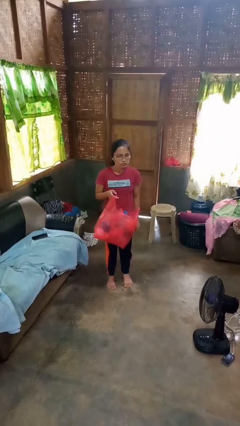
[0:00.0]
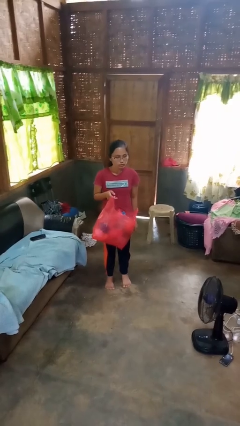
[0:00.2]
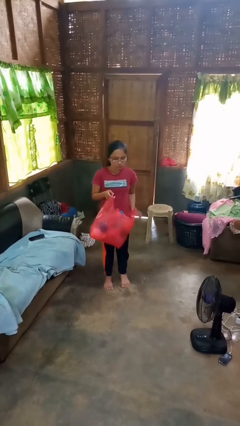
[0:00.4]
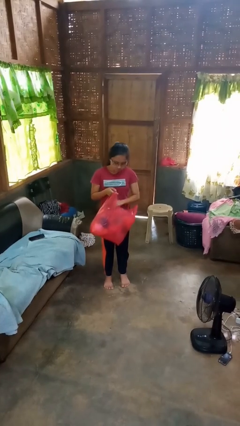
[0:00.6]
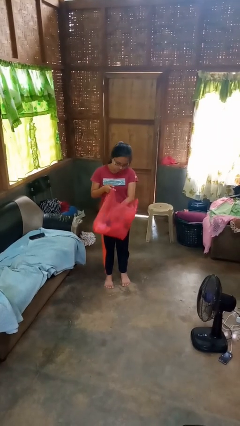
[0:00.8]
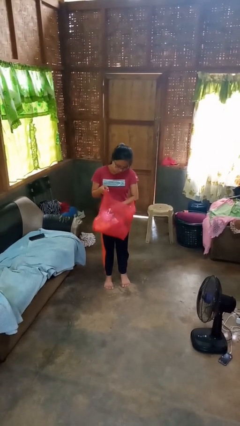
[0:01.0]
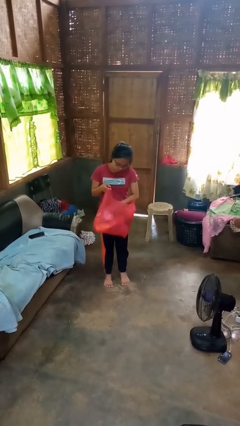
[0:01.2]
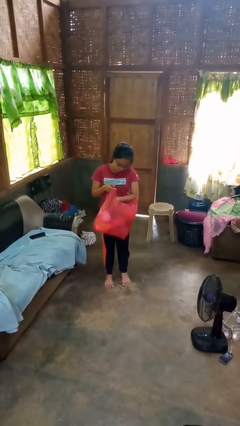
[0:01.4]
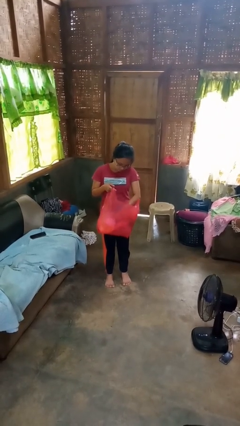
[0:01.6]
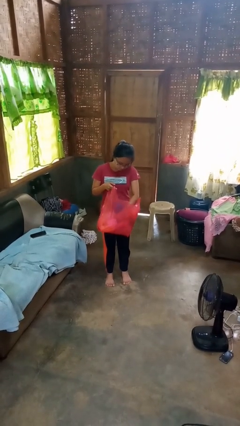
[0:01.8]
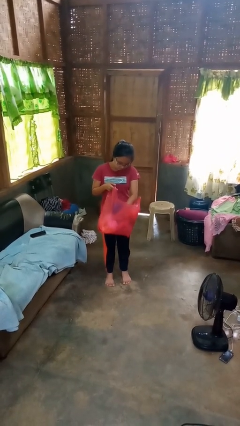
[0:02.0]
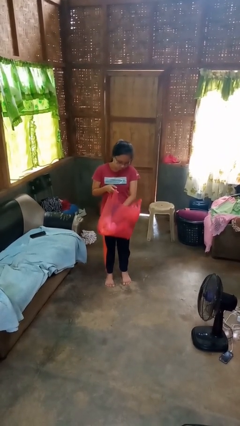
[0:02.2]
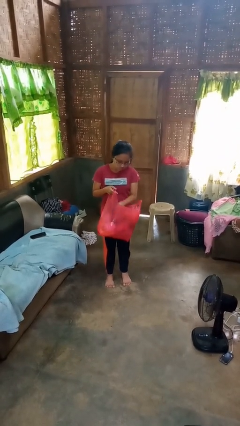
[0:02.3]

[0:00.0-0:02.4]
person searches in bag

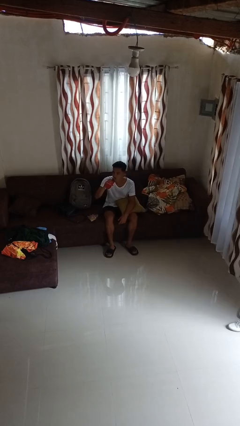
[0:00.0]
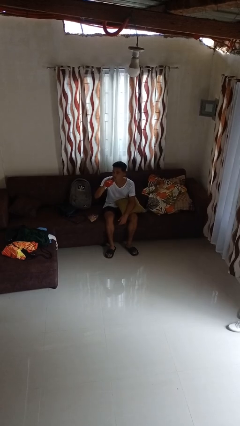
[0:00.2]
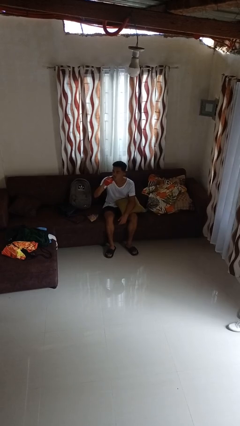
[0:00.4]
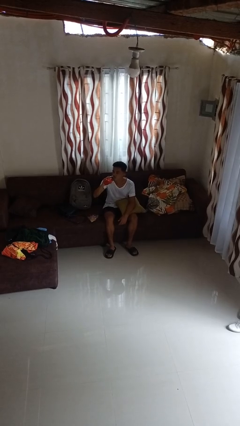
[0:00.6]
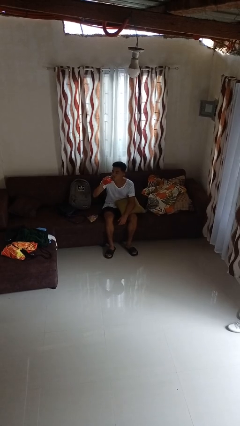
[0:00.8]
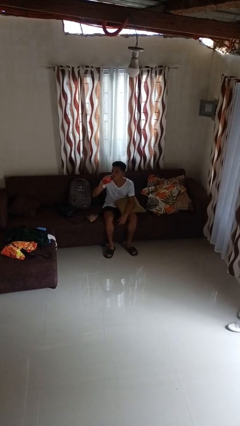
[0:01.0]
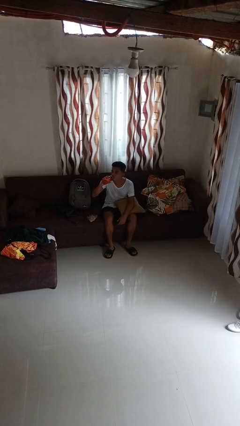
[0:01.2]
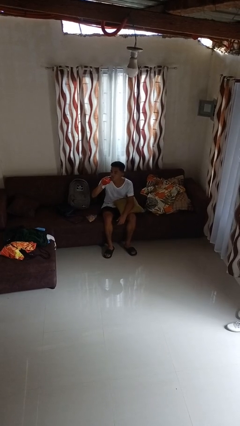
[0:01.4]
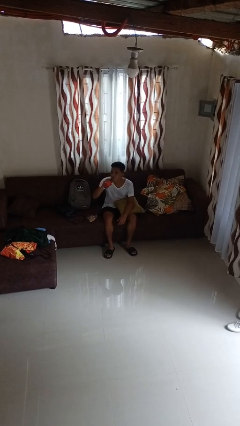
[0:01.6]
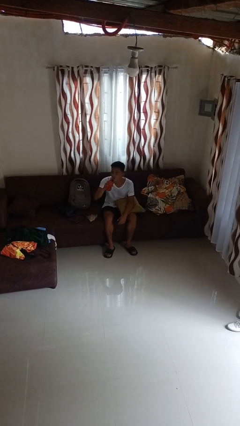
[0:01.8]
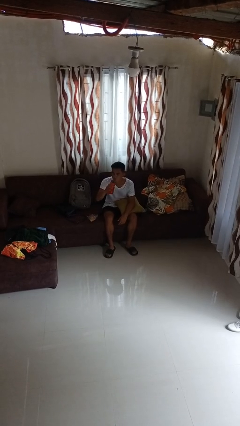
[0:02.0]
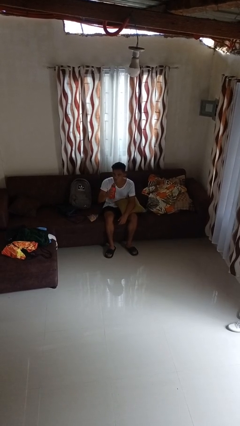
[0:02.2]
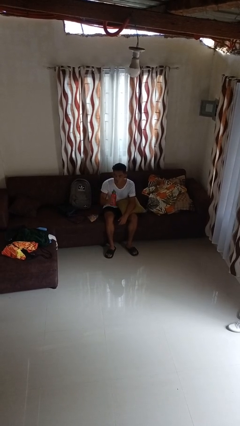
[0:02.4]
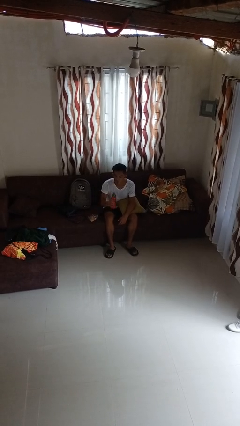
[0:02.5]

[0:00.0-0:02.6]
person drinks from bottle

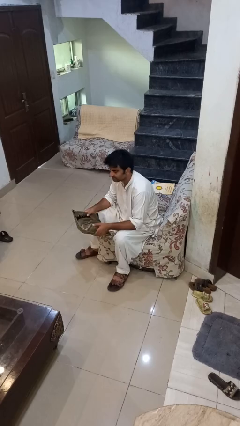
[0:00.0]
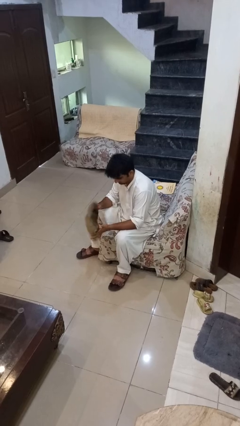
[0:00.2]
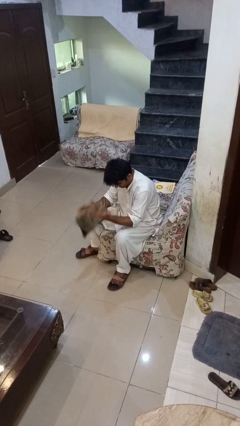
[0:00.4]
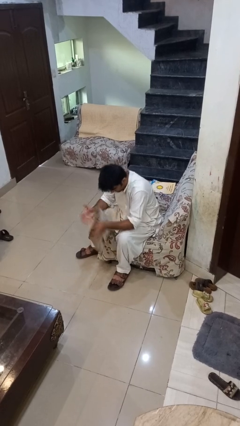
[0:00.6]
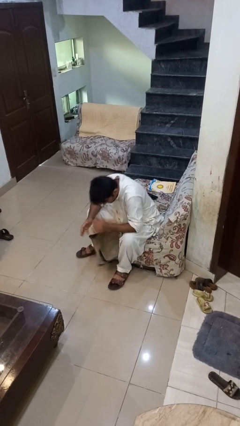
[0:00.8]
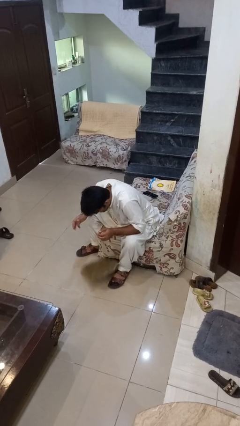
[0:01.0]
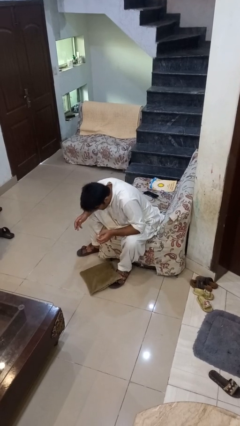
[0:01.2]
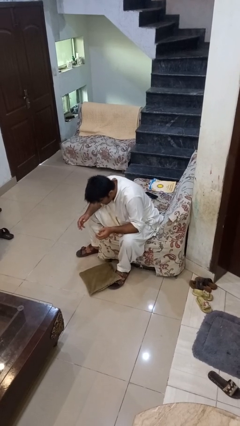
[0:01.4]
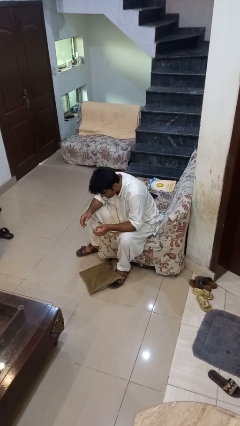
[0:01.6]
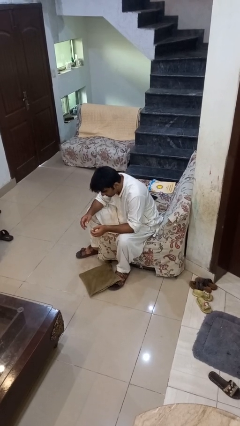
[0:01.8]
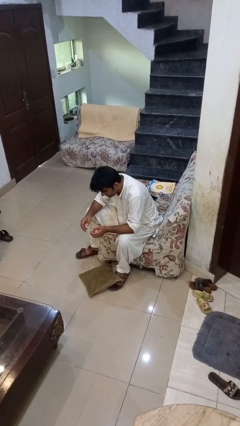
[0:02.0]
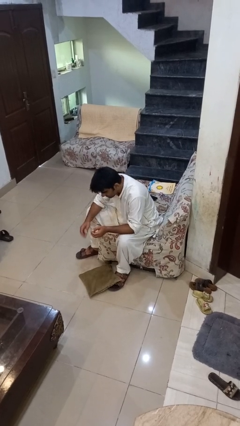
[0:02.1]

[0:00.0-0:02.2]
person drops object

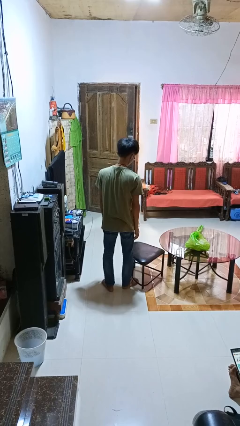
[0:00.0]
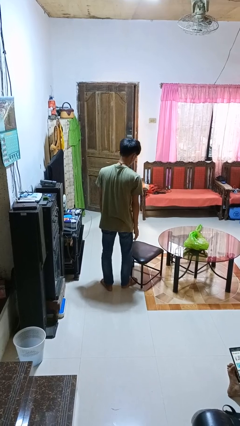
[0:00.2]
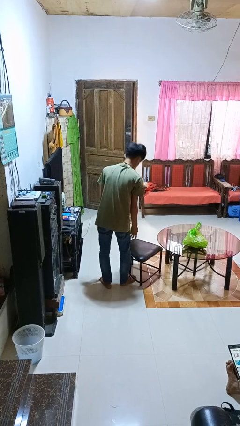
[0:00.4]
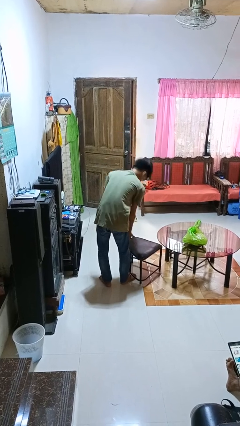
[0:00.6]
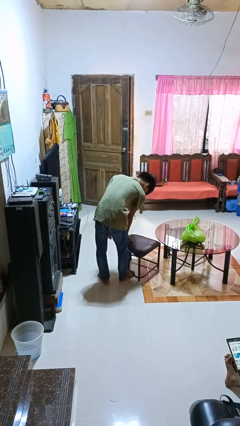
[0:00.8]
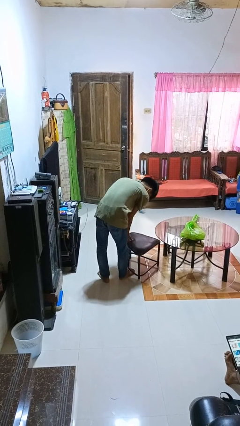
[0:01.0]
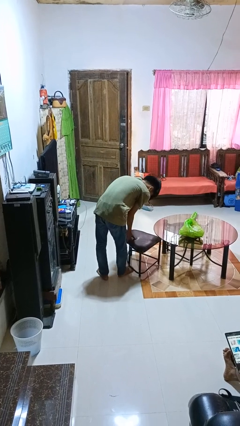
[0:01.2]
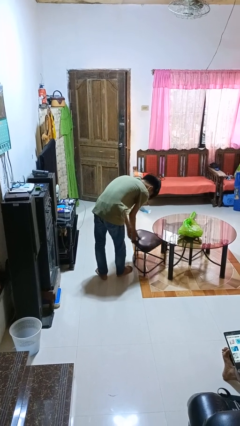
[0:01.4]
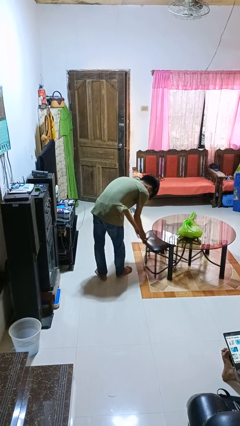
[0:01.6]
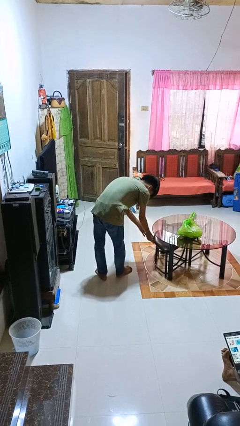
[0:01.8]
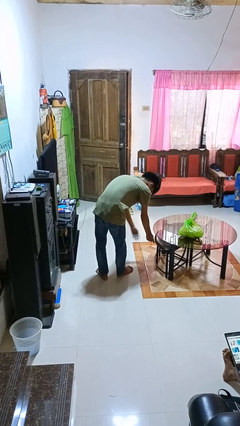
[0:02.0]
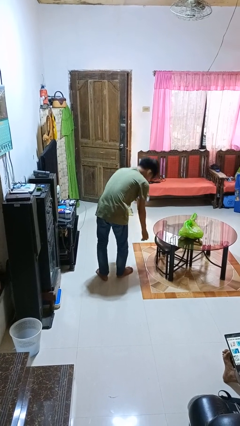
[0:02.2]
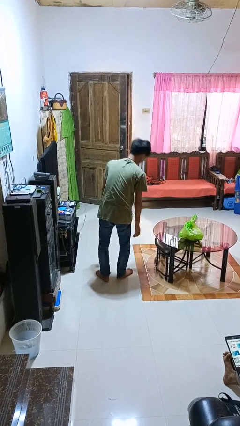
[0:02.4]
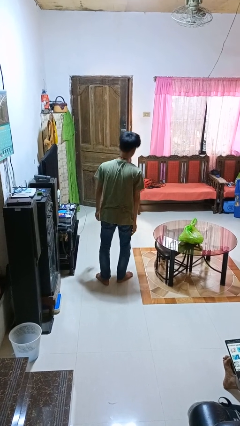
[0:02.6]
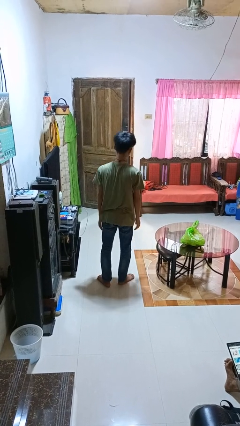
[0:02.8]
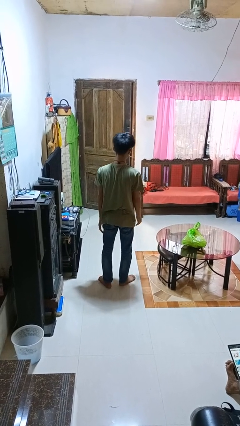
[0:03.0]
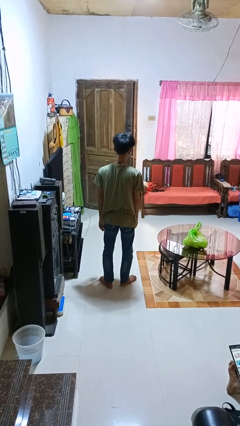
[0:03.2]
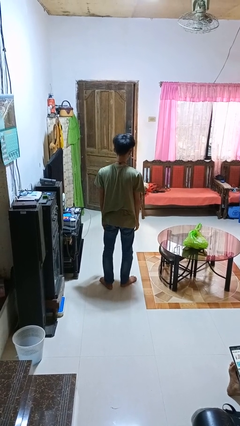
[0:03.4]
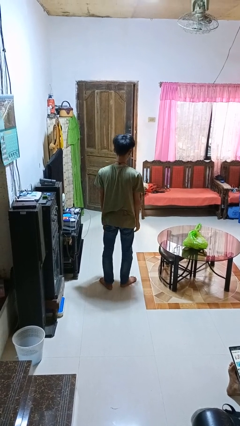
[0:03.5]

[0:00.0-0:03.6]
person pushes in chair

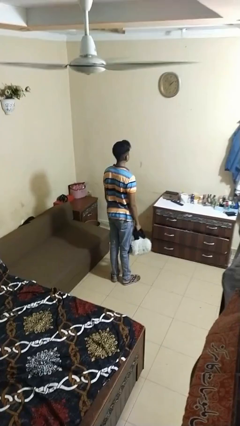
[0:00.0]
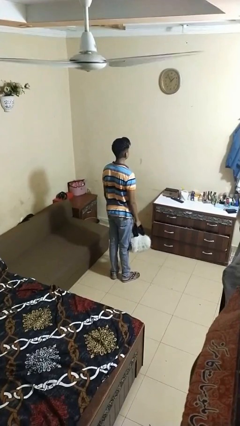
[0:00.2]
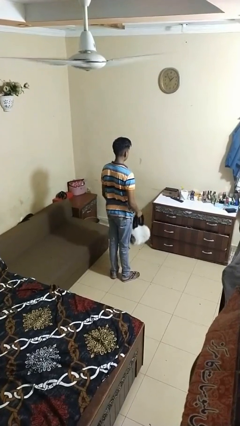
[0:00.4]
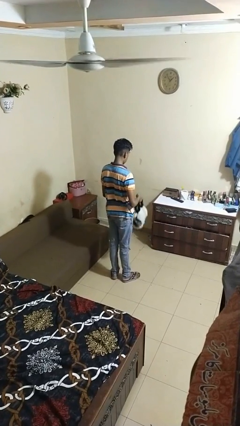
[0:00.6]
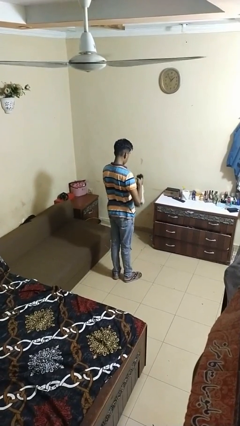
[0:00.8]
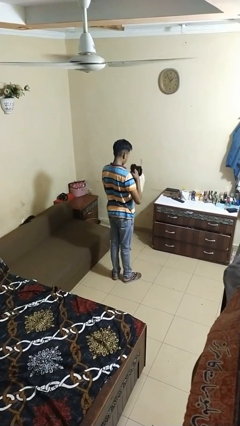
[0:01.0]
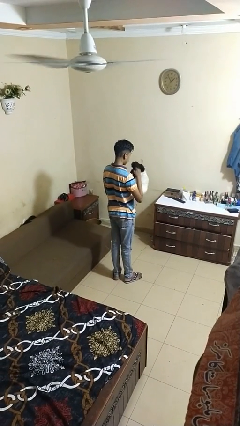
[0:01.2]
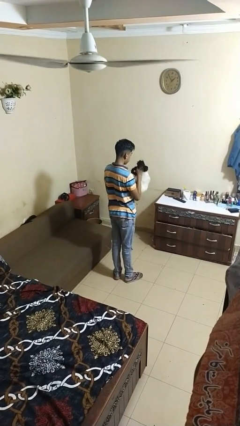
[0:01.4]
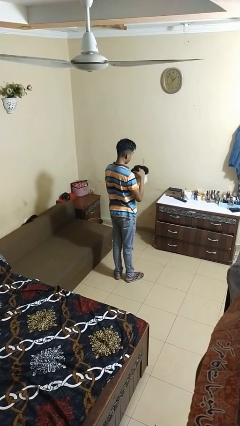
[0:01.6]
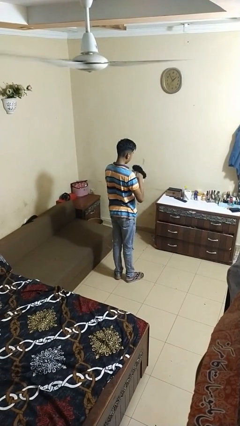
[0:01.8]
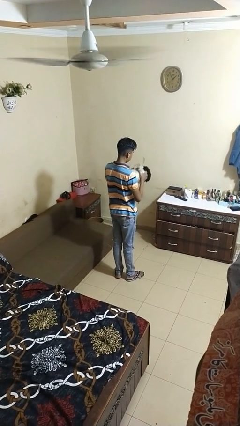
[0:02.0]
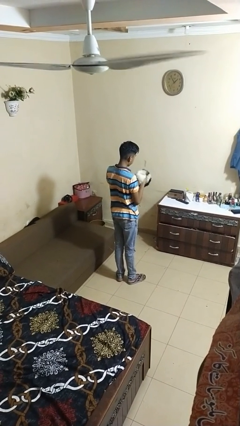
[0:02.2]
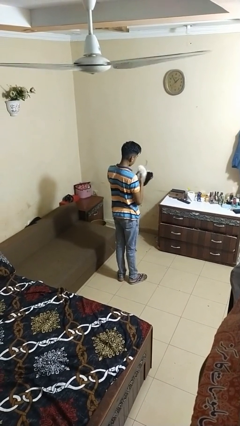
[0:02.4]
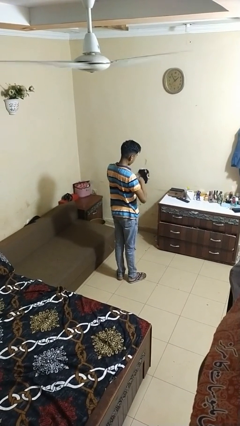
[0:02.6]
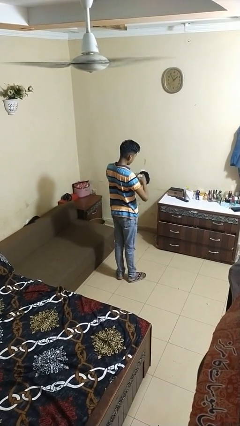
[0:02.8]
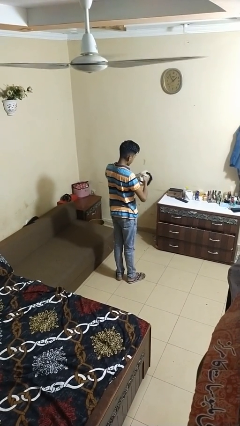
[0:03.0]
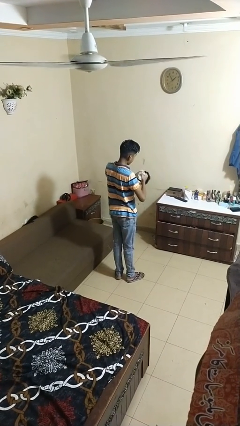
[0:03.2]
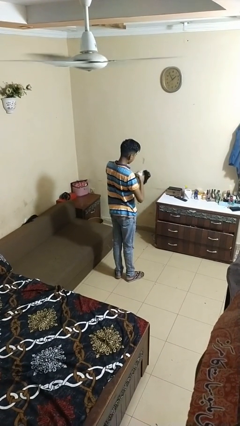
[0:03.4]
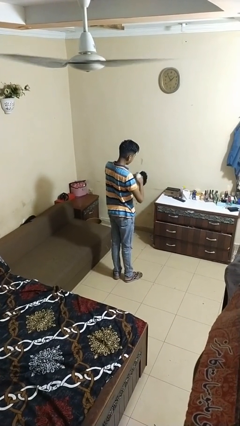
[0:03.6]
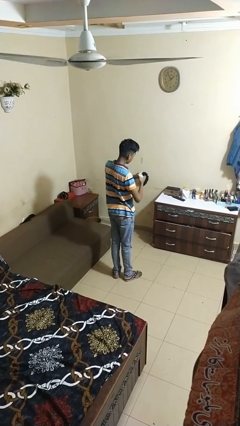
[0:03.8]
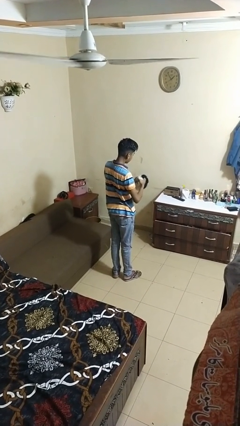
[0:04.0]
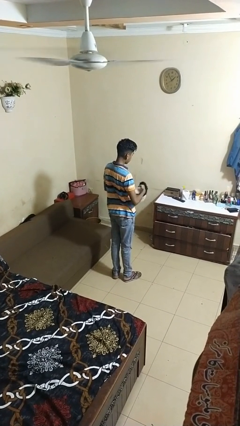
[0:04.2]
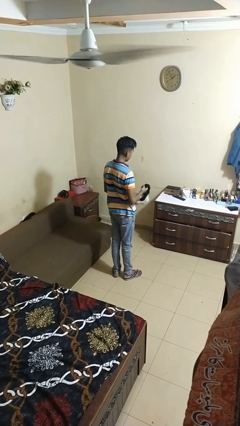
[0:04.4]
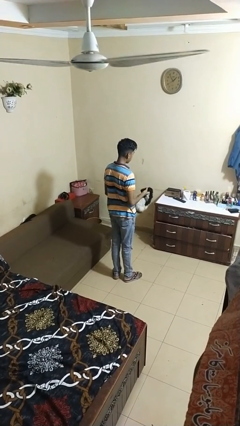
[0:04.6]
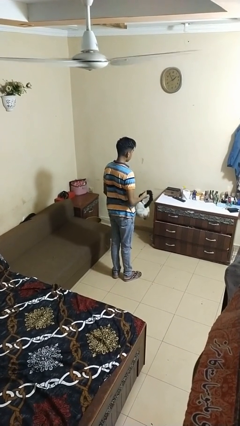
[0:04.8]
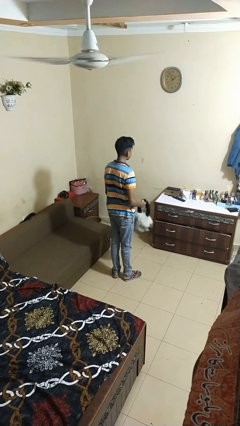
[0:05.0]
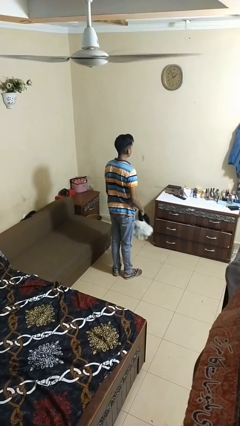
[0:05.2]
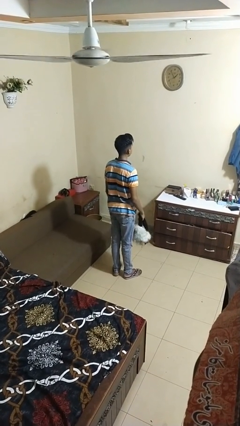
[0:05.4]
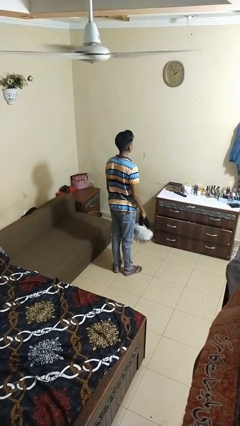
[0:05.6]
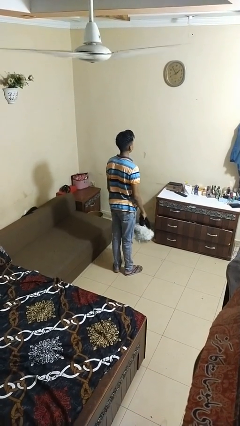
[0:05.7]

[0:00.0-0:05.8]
person squeezes object

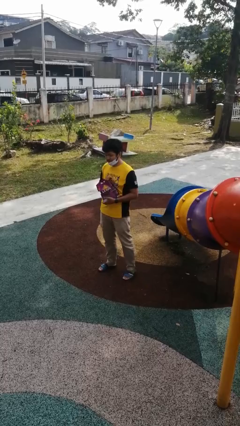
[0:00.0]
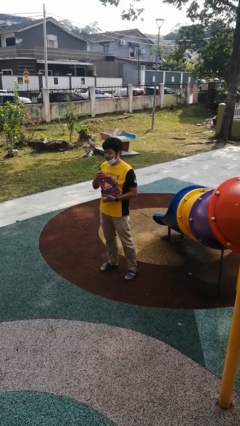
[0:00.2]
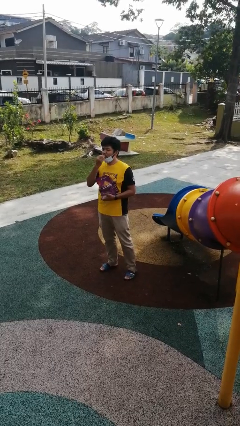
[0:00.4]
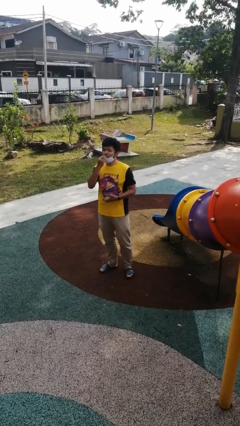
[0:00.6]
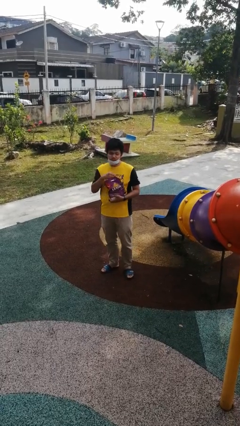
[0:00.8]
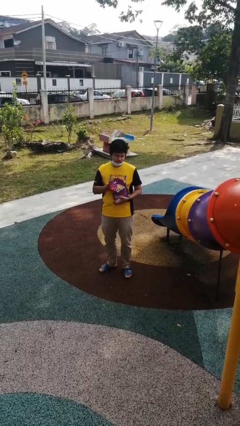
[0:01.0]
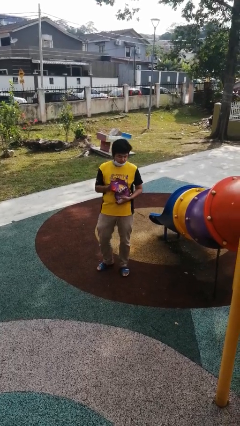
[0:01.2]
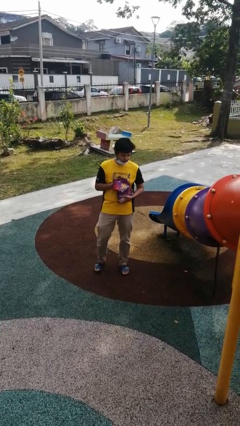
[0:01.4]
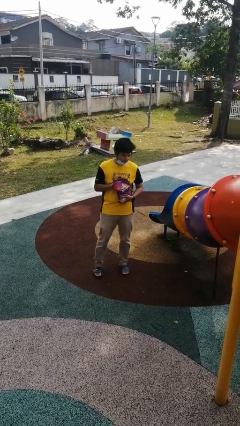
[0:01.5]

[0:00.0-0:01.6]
person eats snack from bag
